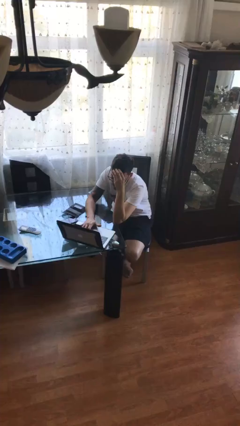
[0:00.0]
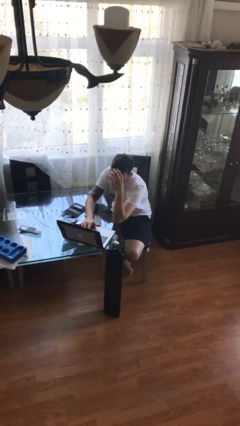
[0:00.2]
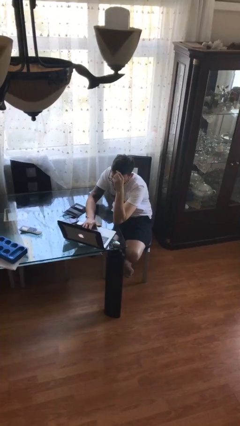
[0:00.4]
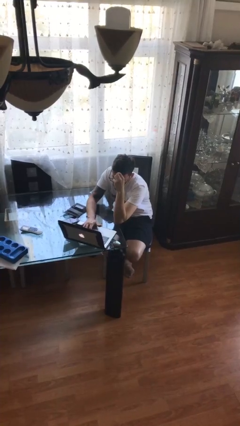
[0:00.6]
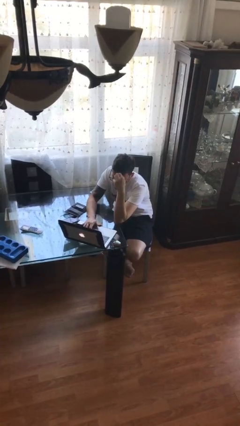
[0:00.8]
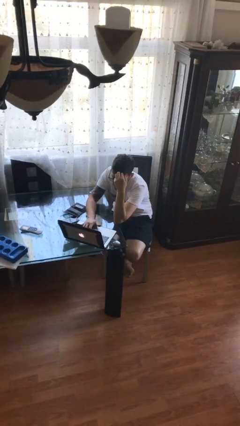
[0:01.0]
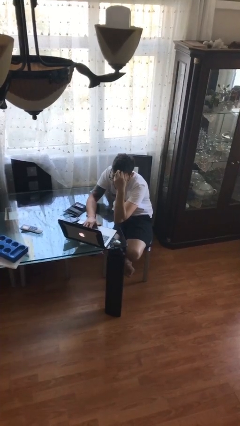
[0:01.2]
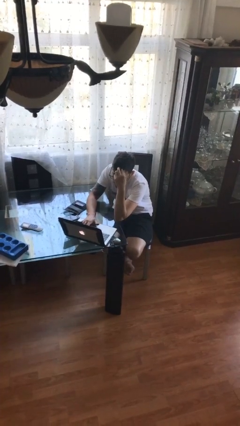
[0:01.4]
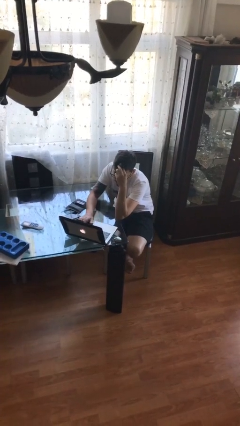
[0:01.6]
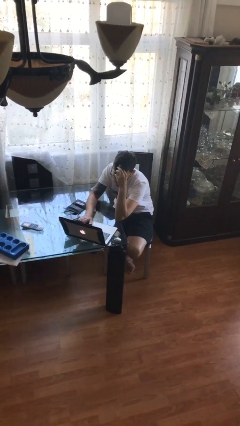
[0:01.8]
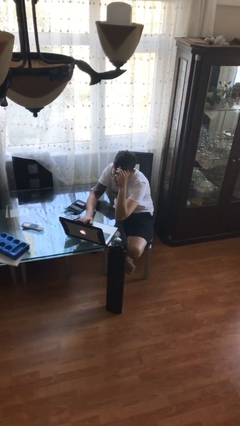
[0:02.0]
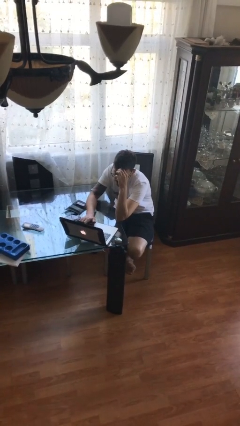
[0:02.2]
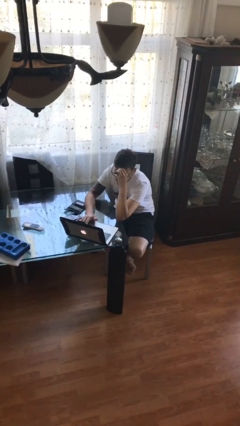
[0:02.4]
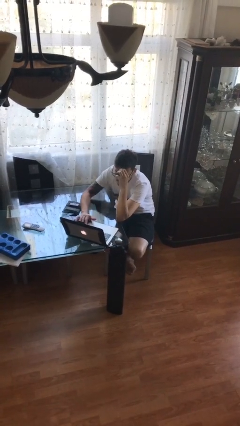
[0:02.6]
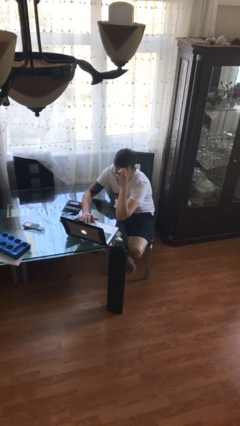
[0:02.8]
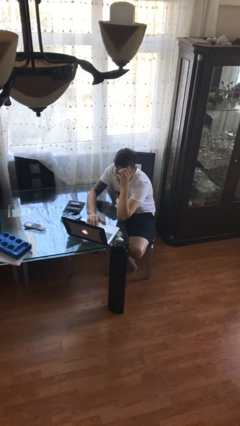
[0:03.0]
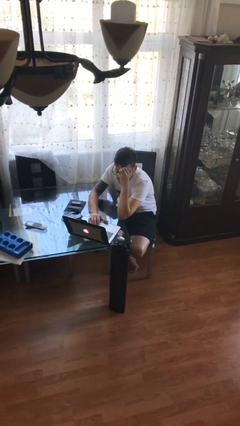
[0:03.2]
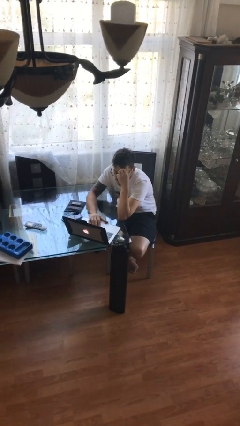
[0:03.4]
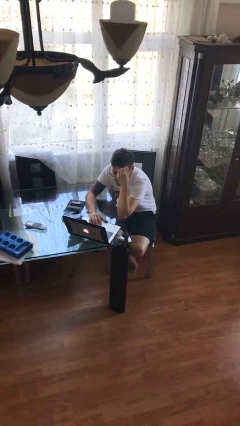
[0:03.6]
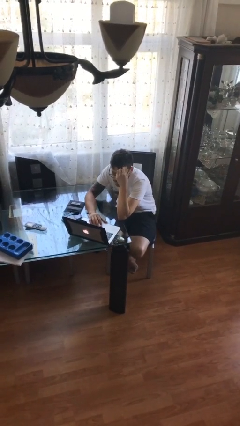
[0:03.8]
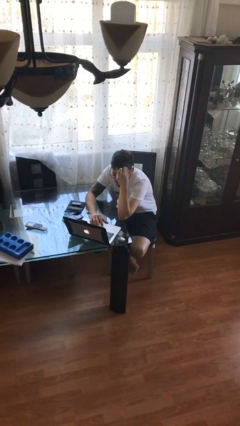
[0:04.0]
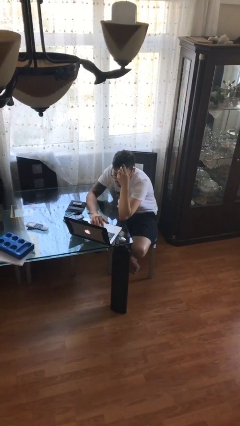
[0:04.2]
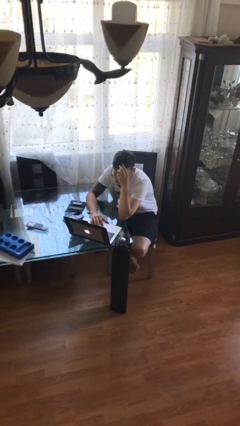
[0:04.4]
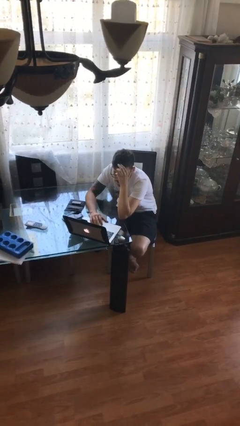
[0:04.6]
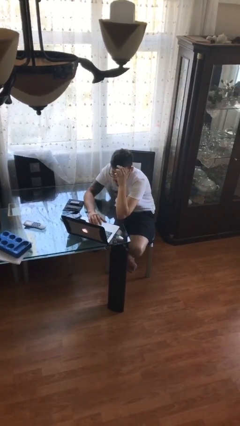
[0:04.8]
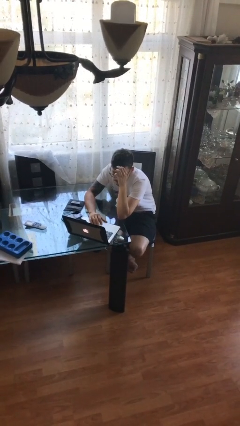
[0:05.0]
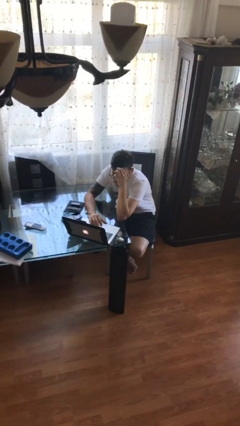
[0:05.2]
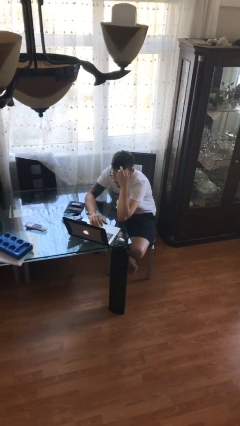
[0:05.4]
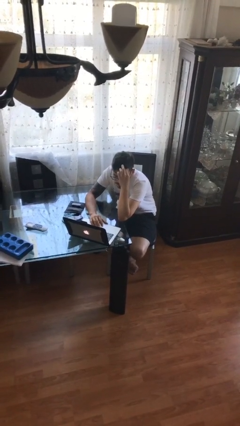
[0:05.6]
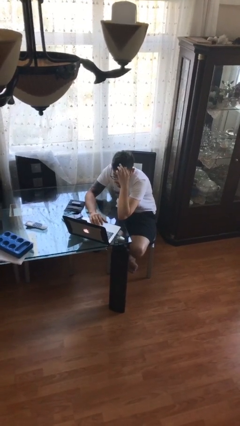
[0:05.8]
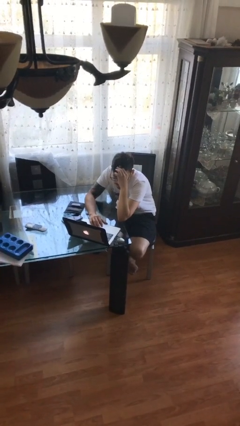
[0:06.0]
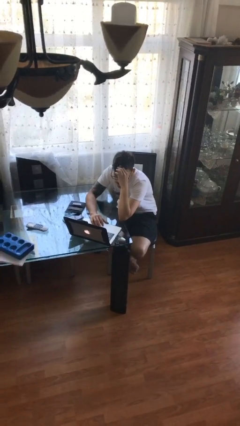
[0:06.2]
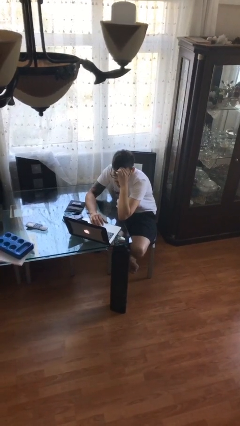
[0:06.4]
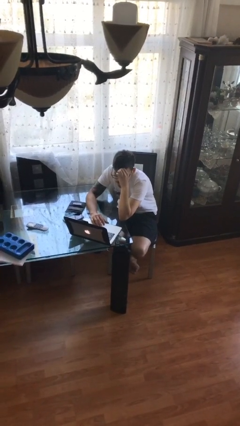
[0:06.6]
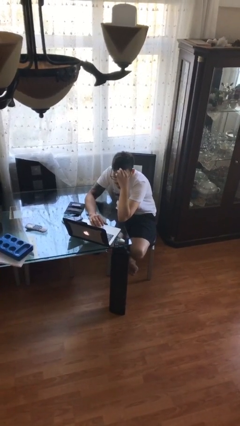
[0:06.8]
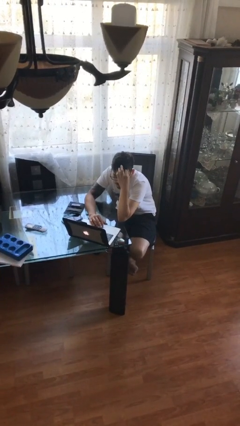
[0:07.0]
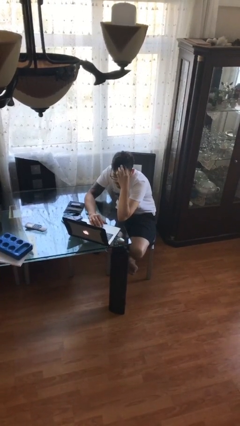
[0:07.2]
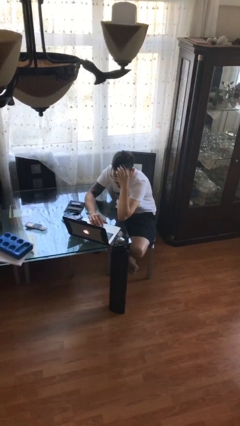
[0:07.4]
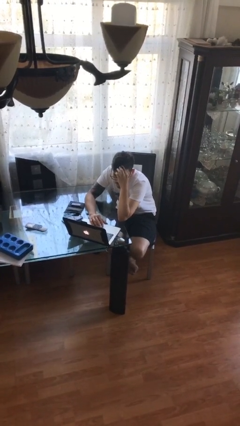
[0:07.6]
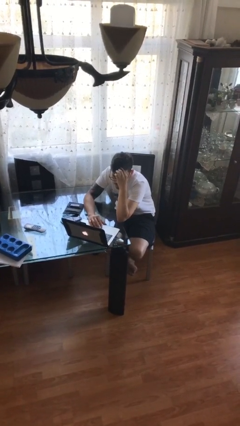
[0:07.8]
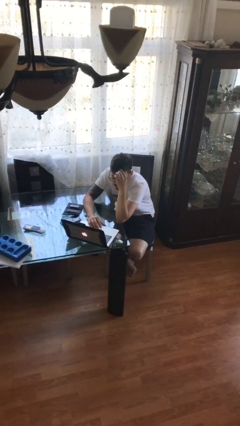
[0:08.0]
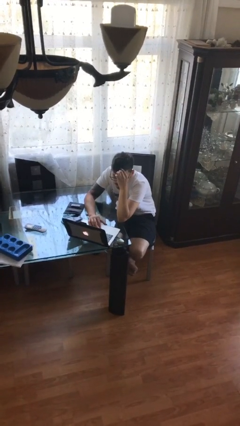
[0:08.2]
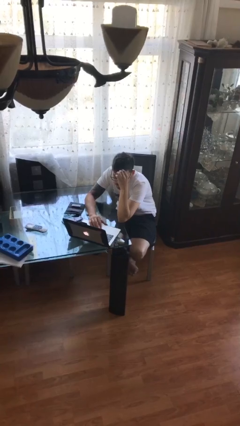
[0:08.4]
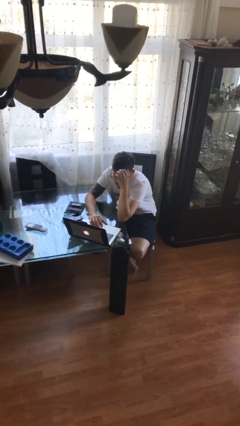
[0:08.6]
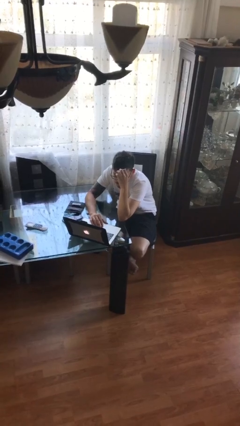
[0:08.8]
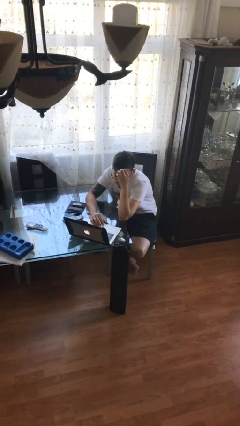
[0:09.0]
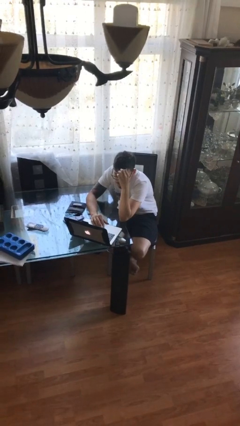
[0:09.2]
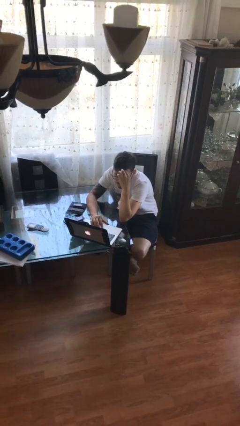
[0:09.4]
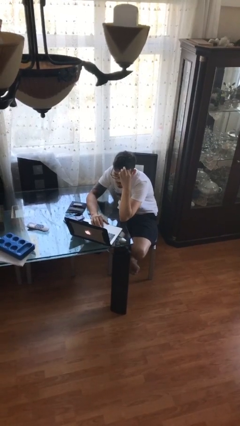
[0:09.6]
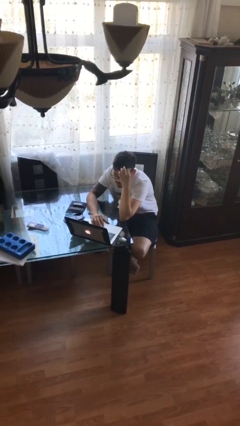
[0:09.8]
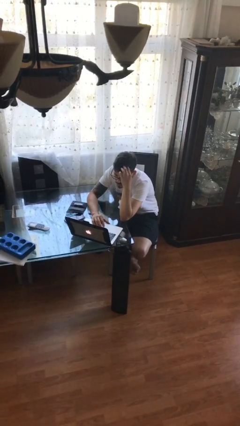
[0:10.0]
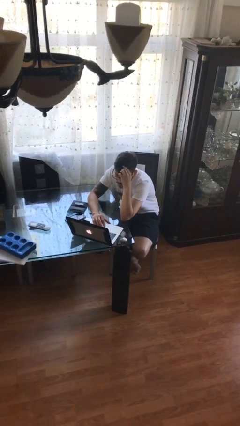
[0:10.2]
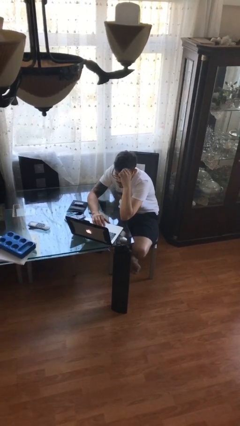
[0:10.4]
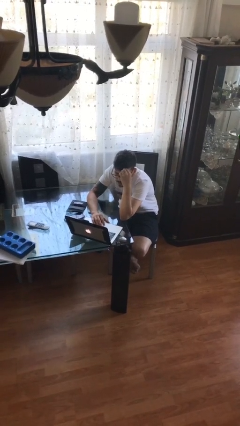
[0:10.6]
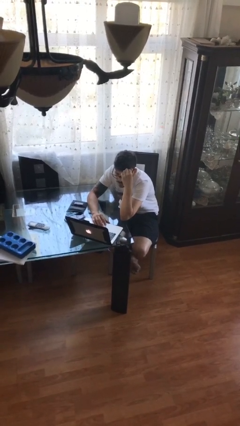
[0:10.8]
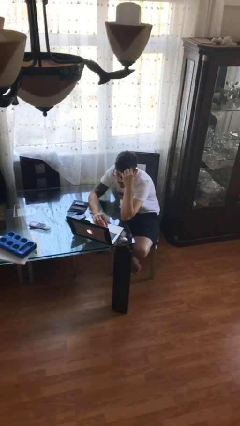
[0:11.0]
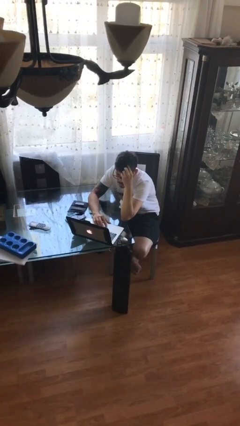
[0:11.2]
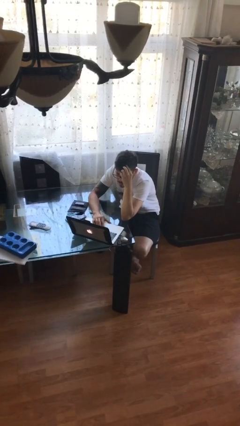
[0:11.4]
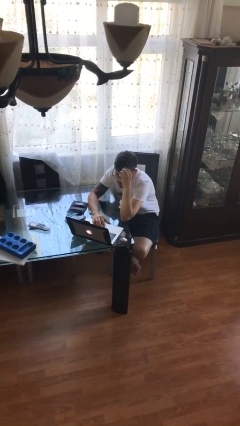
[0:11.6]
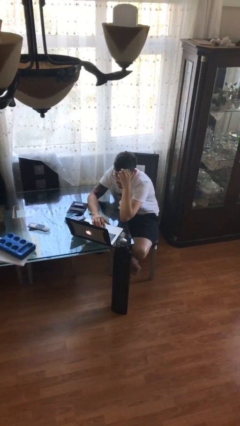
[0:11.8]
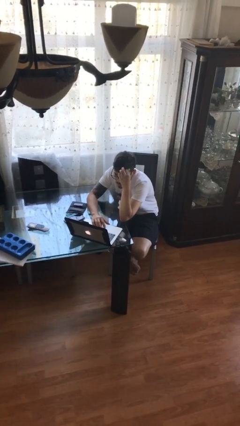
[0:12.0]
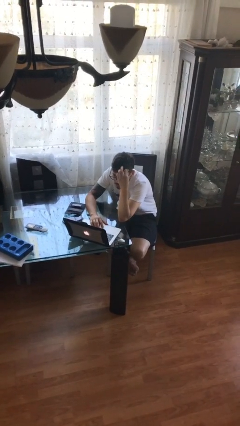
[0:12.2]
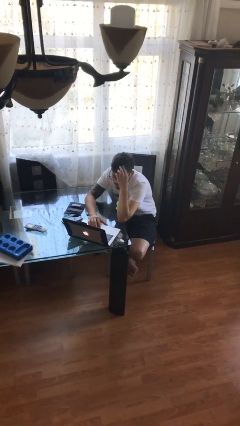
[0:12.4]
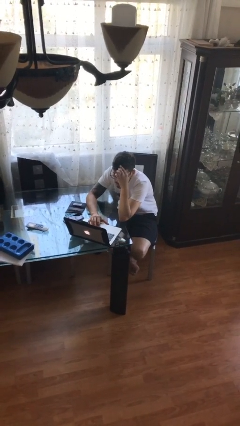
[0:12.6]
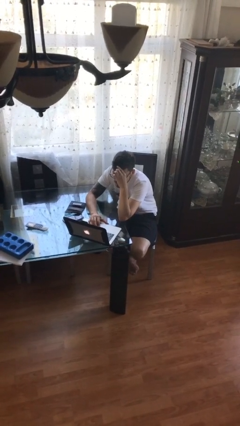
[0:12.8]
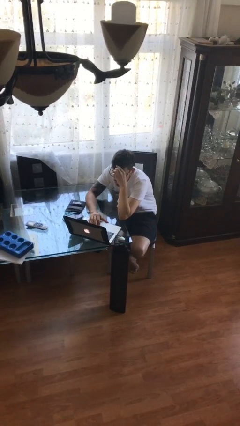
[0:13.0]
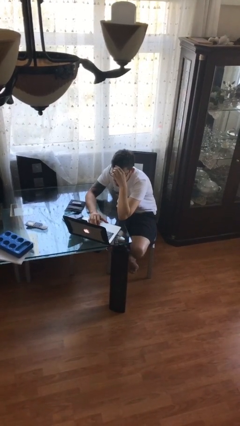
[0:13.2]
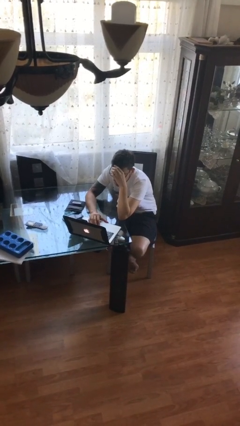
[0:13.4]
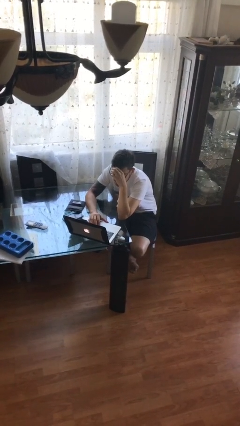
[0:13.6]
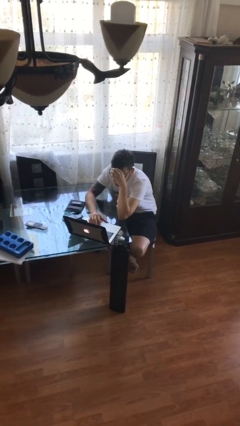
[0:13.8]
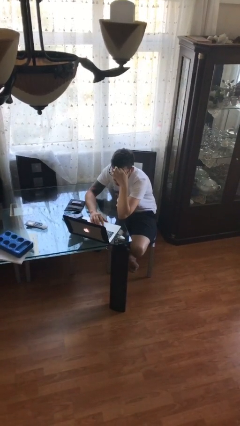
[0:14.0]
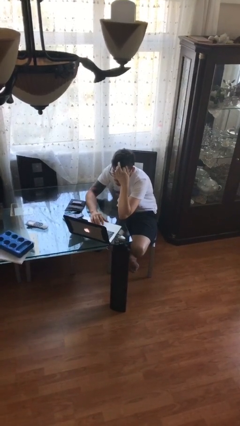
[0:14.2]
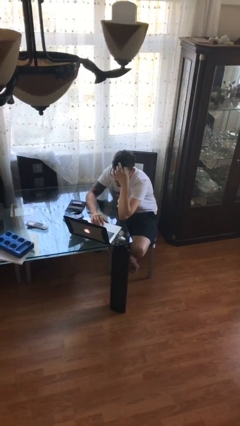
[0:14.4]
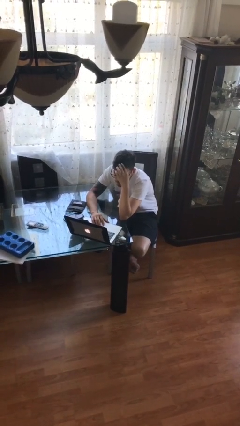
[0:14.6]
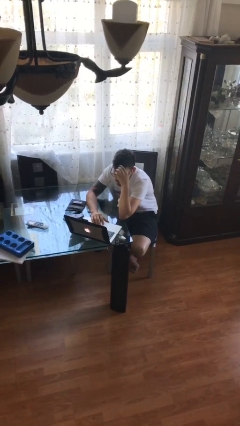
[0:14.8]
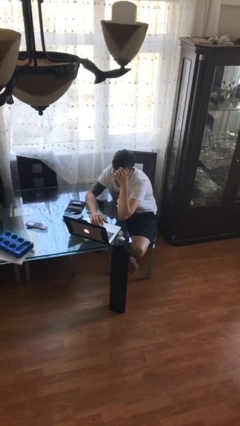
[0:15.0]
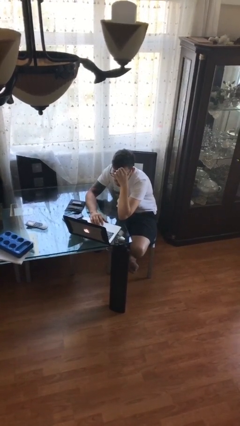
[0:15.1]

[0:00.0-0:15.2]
person interacts with laptop

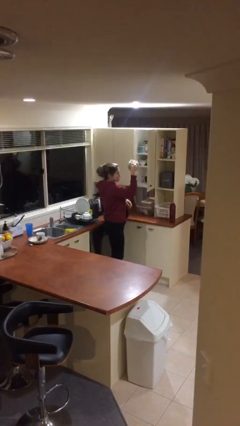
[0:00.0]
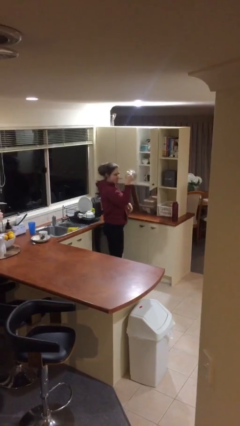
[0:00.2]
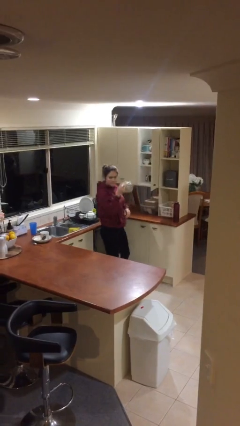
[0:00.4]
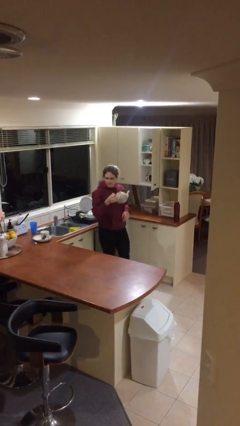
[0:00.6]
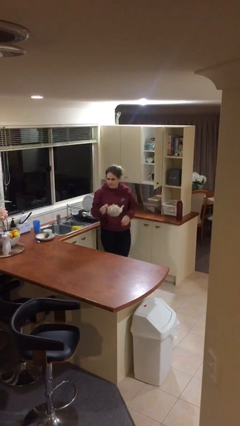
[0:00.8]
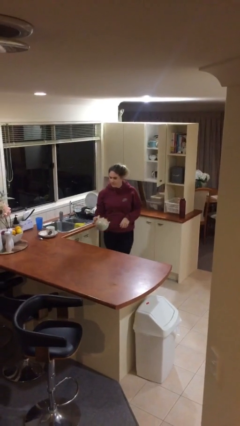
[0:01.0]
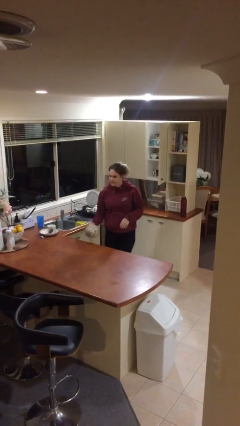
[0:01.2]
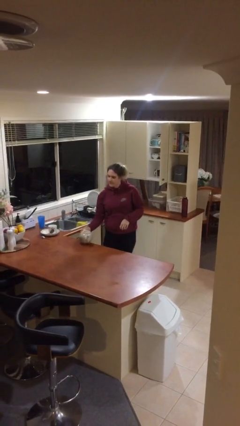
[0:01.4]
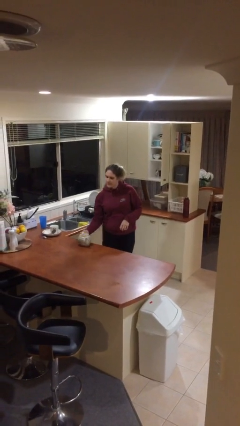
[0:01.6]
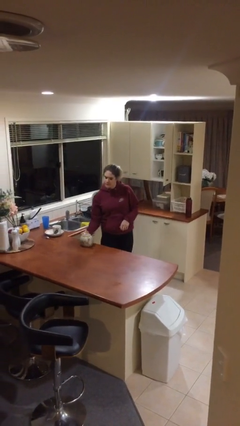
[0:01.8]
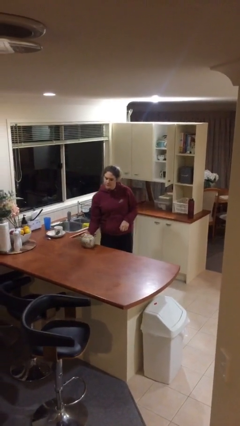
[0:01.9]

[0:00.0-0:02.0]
person puts down object on table

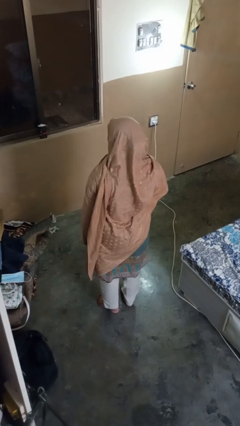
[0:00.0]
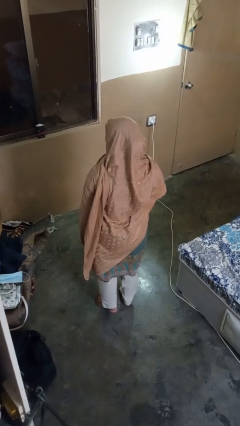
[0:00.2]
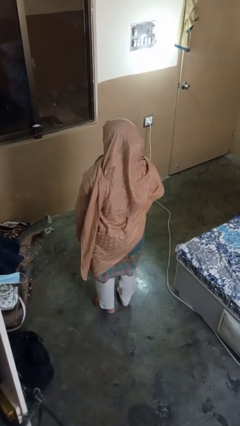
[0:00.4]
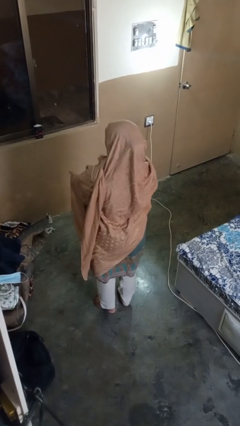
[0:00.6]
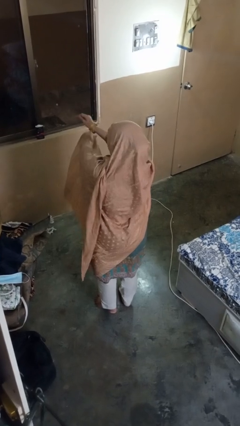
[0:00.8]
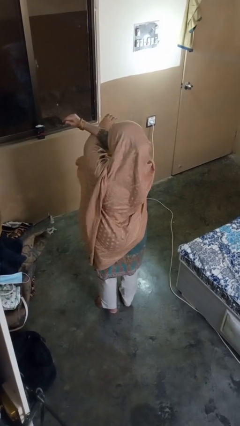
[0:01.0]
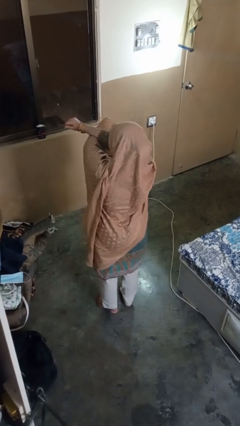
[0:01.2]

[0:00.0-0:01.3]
person crosses arms
